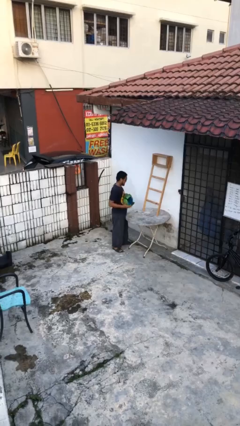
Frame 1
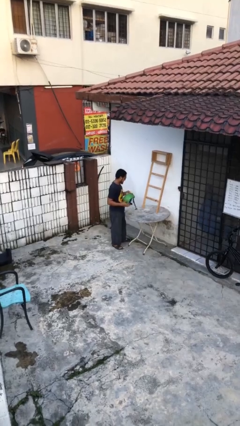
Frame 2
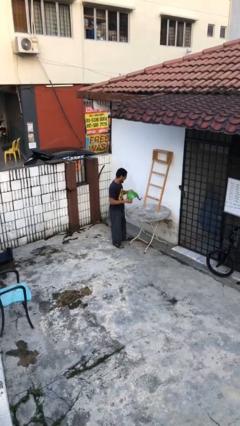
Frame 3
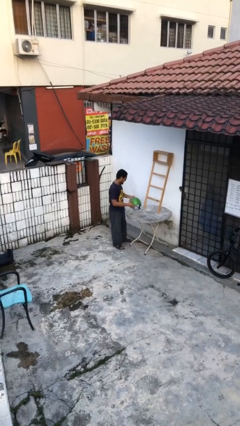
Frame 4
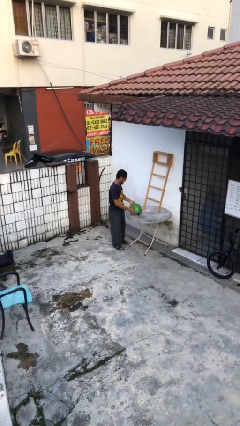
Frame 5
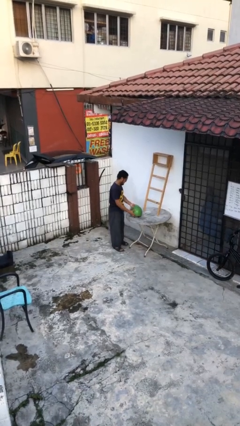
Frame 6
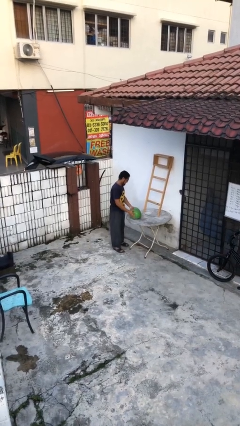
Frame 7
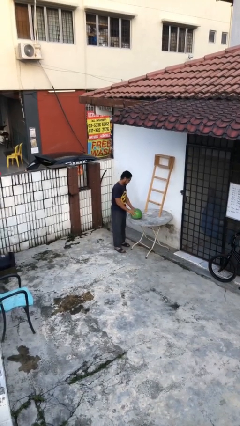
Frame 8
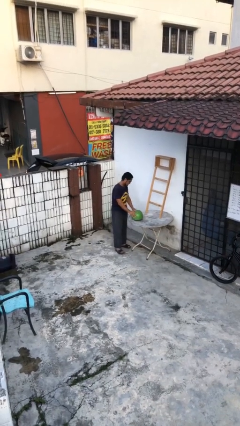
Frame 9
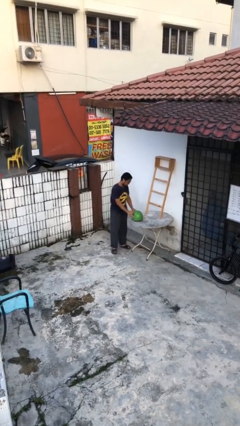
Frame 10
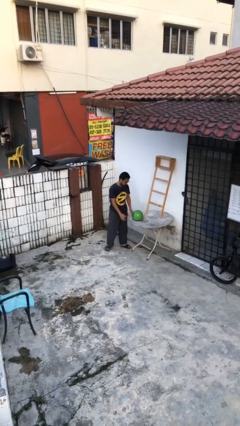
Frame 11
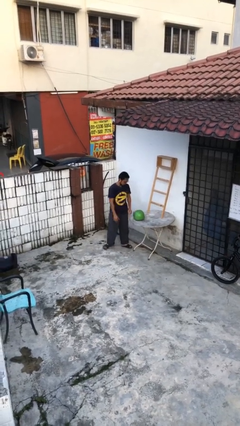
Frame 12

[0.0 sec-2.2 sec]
person puts down object on table

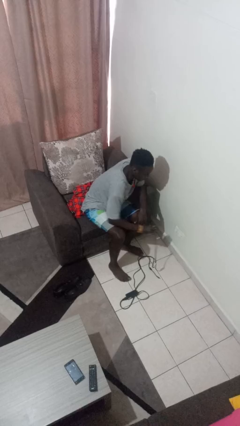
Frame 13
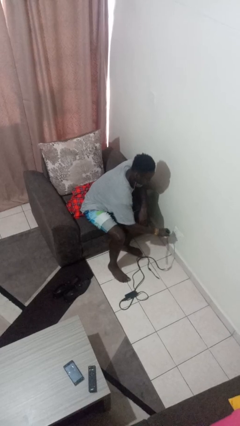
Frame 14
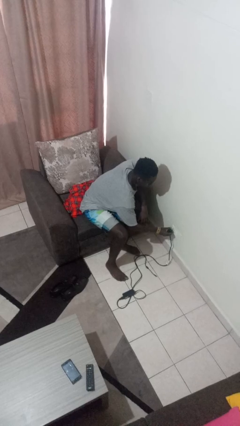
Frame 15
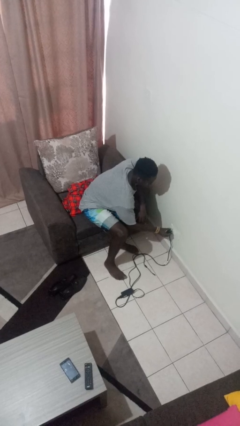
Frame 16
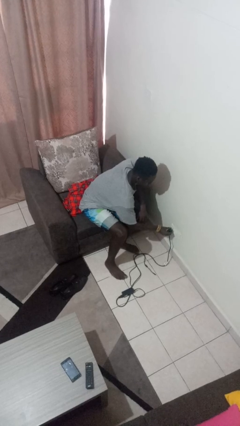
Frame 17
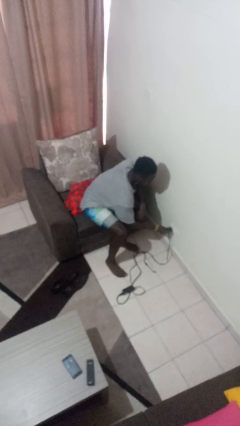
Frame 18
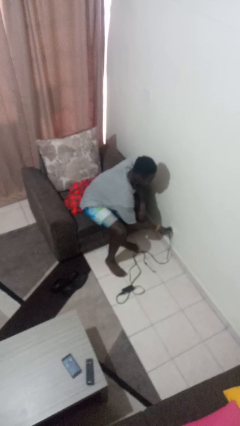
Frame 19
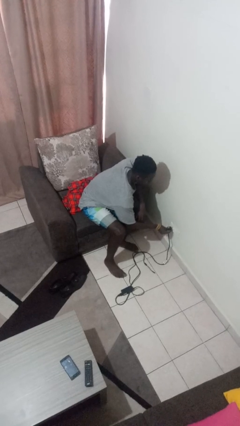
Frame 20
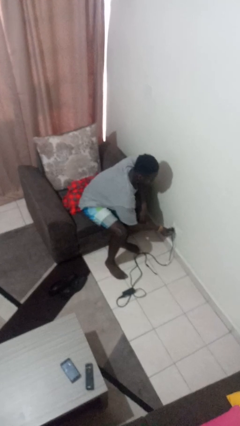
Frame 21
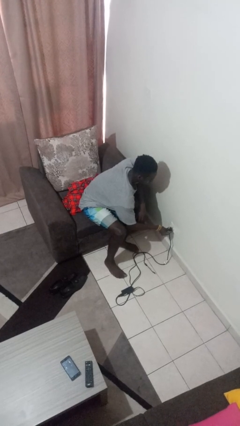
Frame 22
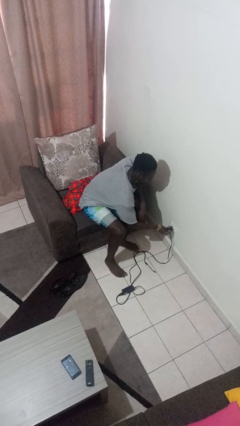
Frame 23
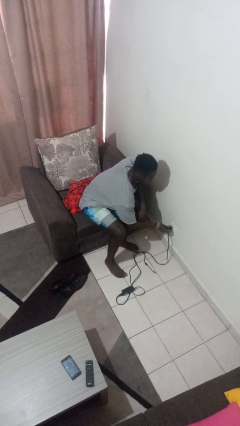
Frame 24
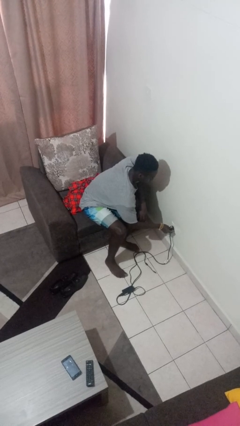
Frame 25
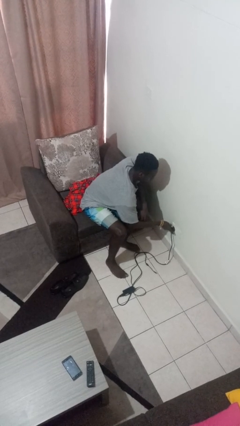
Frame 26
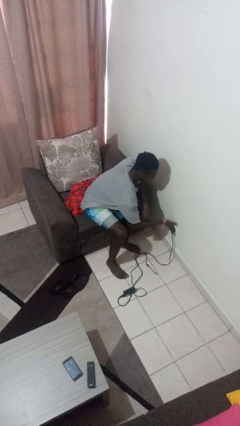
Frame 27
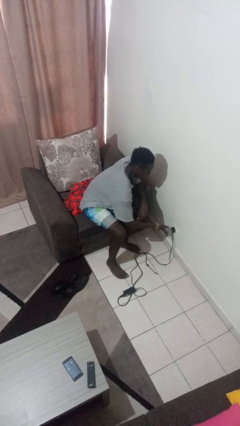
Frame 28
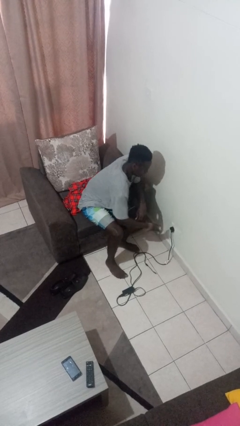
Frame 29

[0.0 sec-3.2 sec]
person plugs into electrical socket

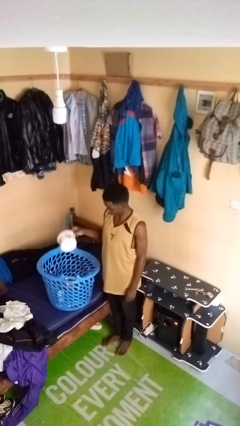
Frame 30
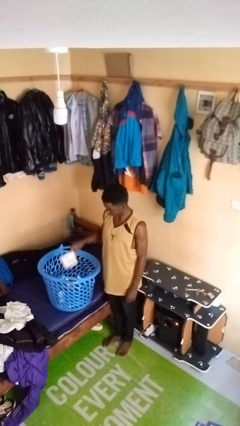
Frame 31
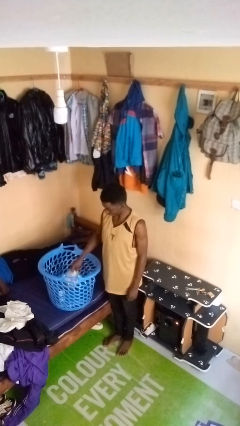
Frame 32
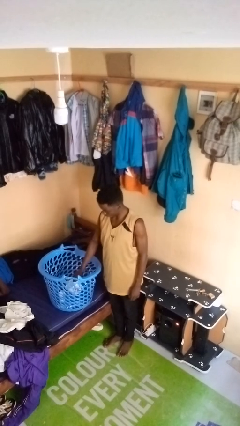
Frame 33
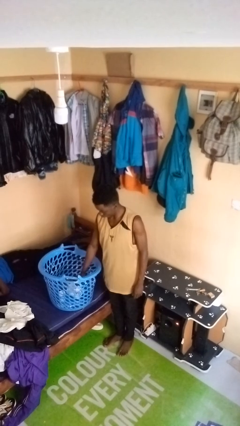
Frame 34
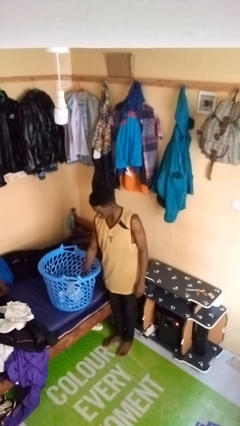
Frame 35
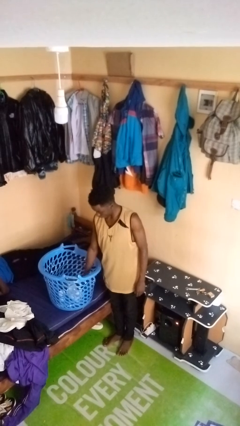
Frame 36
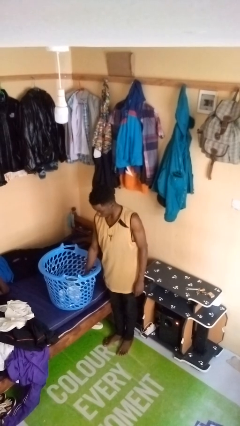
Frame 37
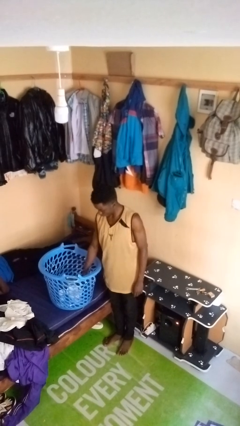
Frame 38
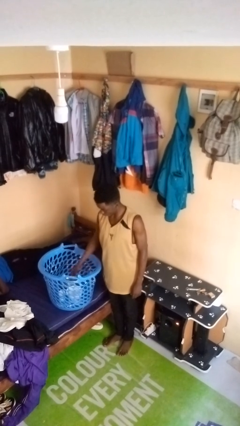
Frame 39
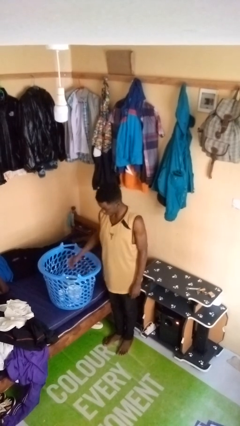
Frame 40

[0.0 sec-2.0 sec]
person puts object into basket

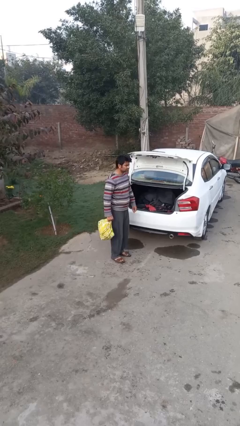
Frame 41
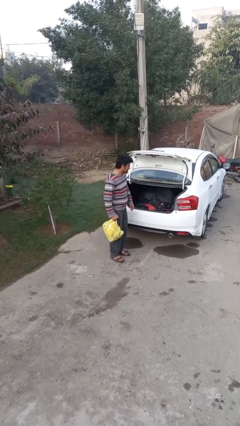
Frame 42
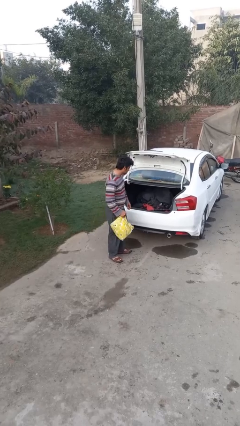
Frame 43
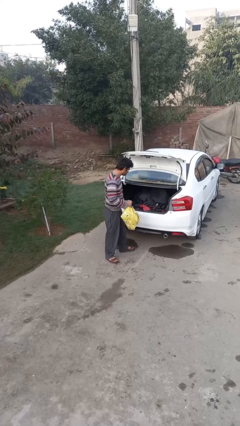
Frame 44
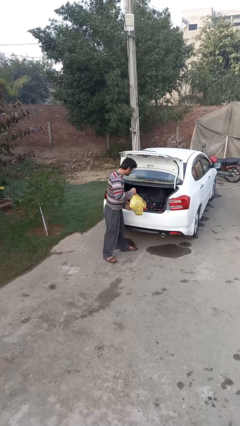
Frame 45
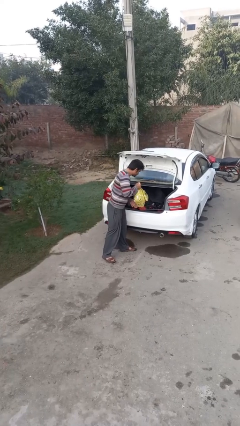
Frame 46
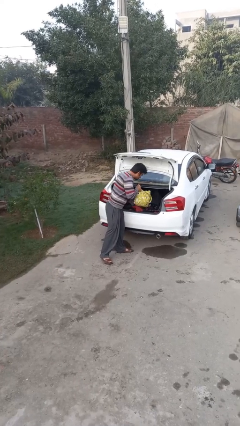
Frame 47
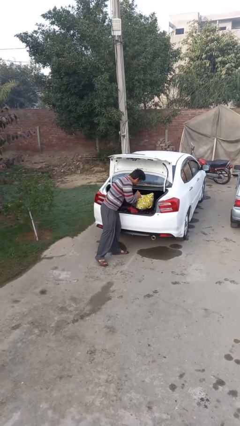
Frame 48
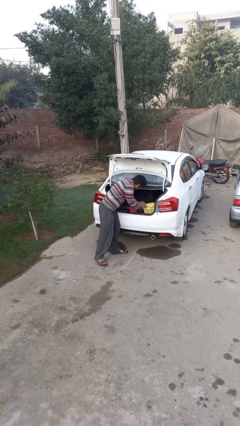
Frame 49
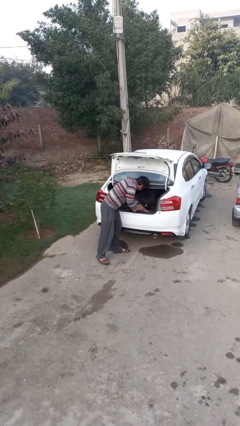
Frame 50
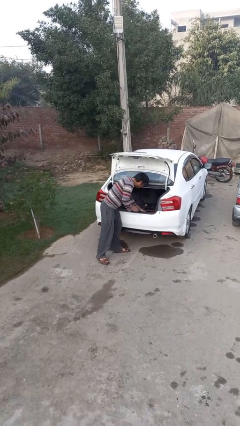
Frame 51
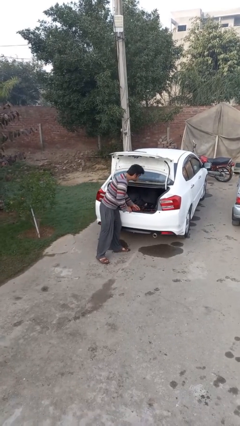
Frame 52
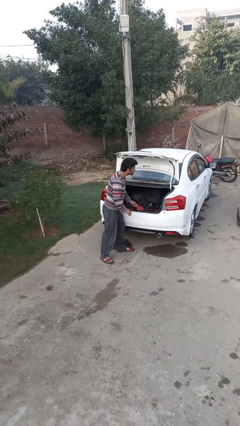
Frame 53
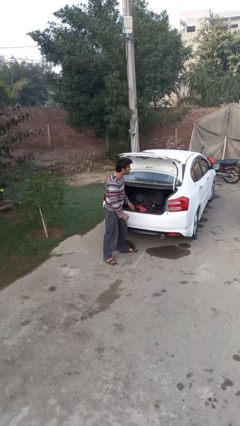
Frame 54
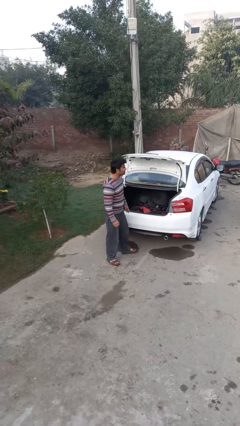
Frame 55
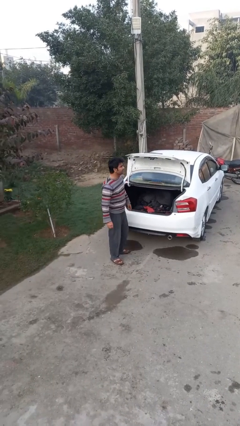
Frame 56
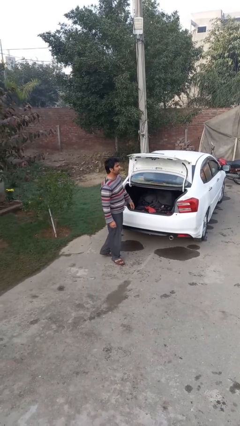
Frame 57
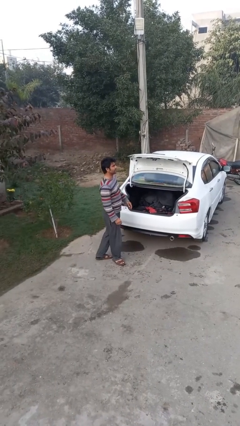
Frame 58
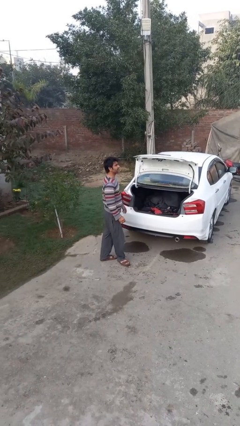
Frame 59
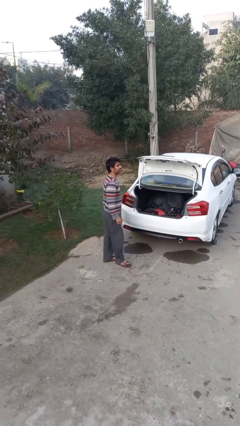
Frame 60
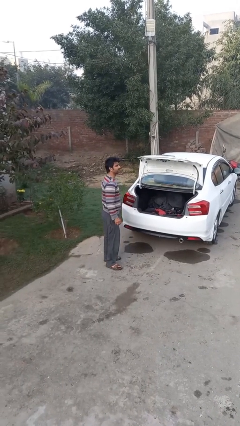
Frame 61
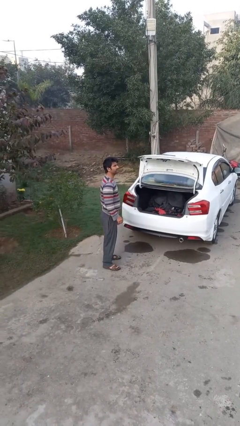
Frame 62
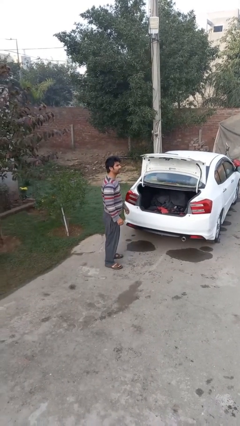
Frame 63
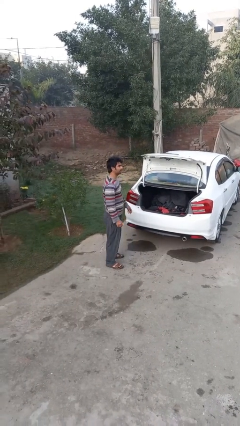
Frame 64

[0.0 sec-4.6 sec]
person loads car

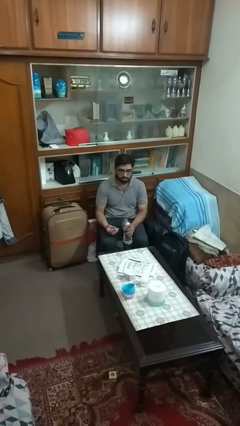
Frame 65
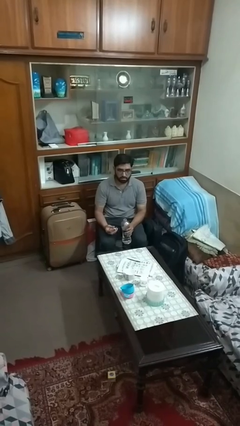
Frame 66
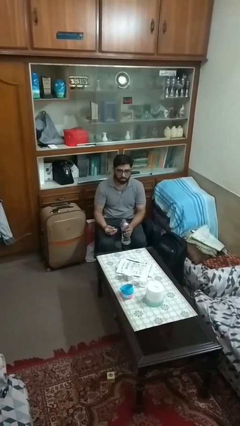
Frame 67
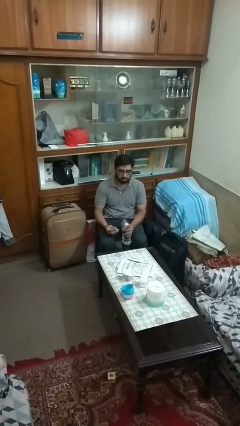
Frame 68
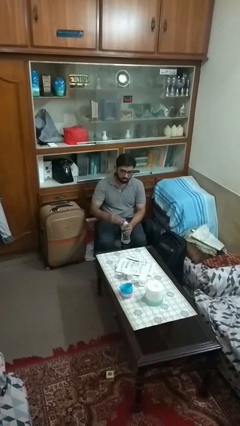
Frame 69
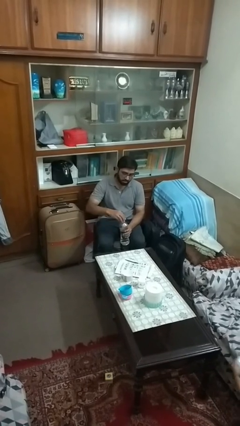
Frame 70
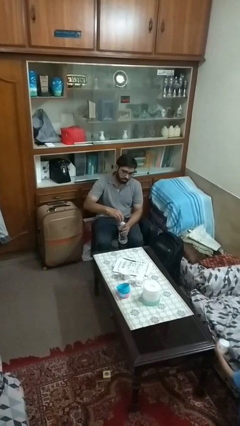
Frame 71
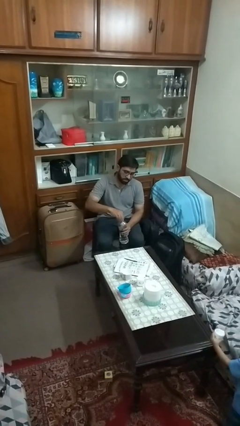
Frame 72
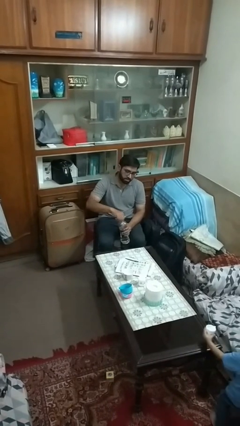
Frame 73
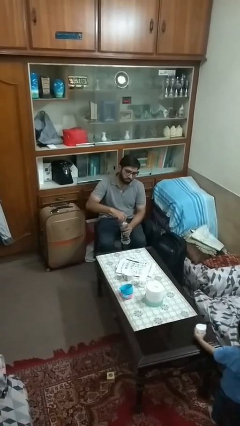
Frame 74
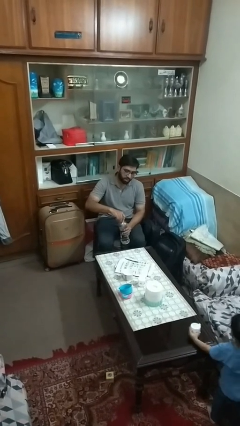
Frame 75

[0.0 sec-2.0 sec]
person screws lid to bottle

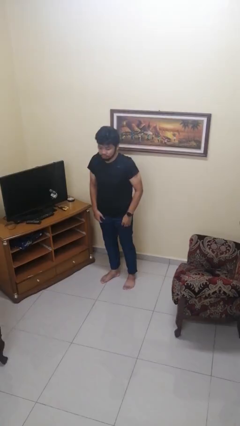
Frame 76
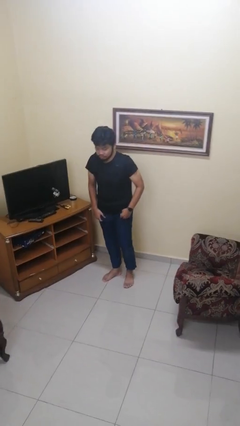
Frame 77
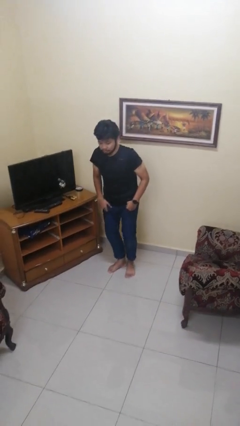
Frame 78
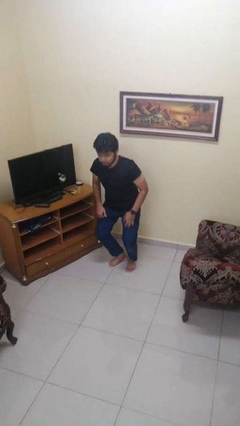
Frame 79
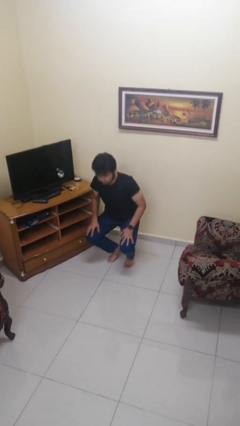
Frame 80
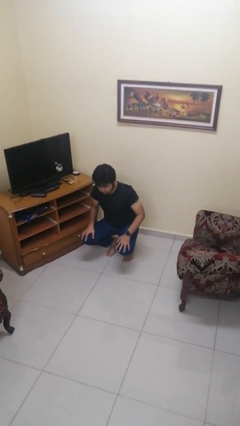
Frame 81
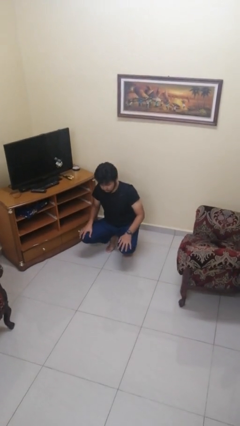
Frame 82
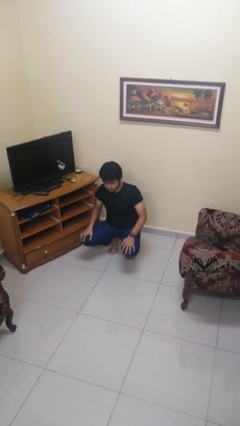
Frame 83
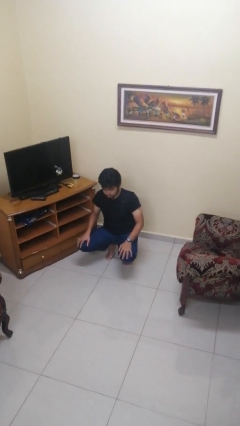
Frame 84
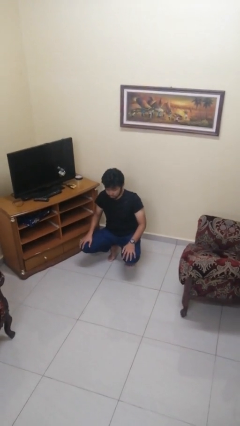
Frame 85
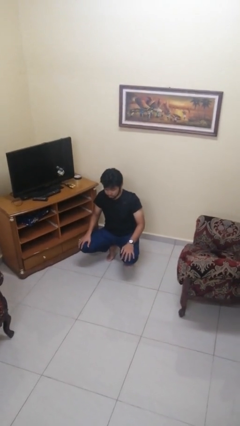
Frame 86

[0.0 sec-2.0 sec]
person squats

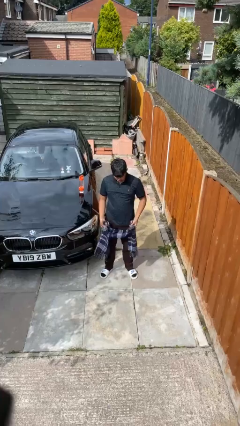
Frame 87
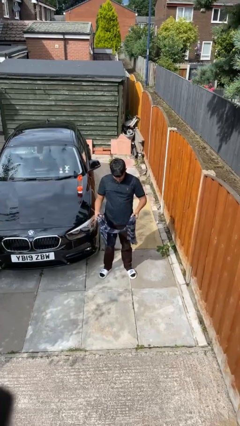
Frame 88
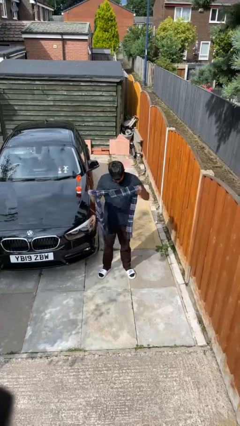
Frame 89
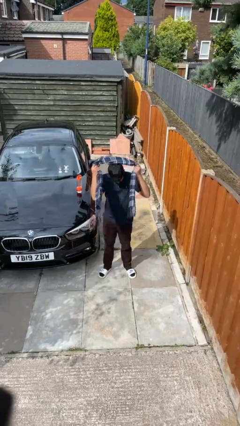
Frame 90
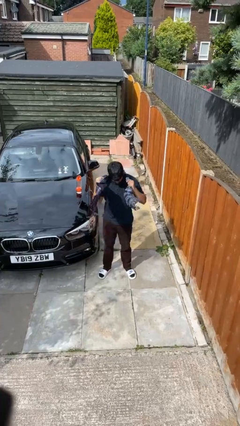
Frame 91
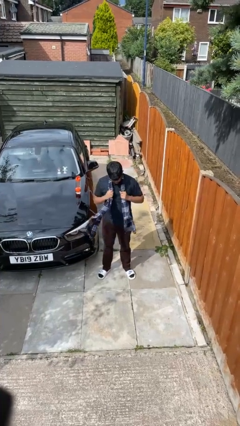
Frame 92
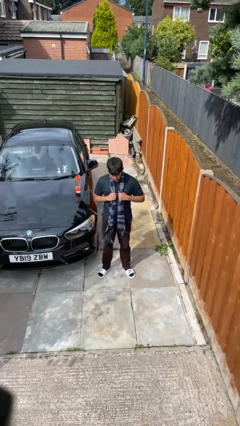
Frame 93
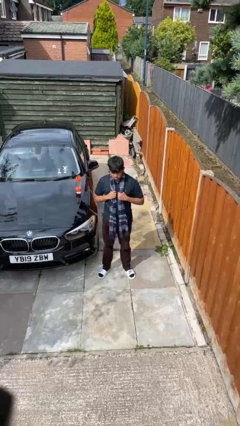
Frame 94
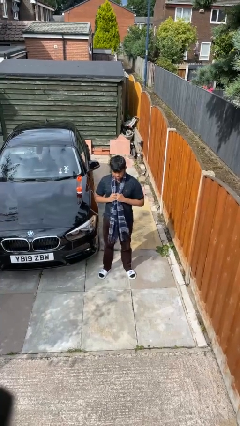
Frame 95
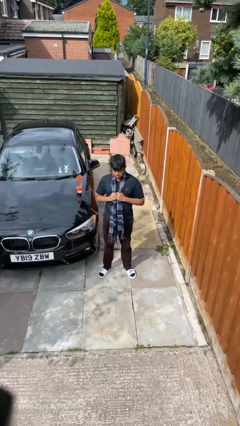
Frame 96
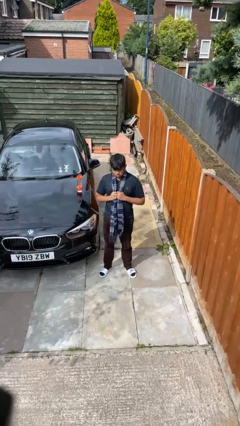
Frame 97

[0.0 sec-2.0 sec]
person puts on scarf
